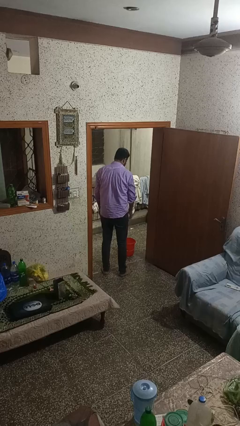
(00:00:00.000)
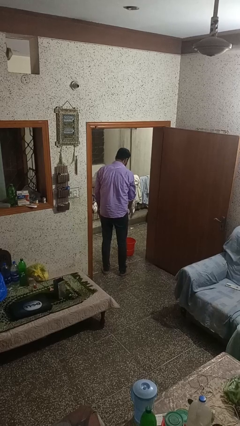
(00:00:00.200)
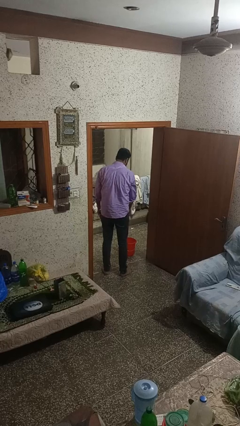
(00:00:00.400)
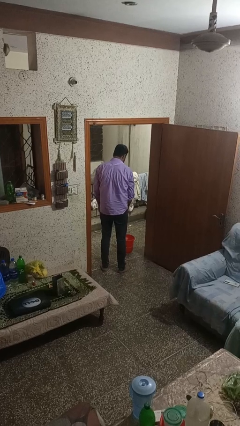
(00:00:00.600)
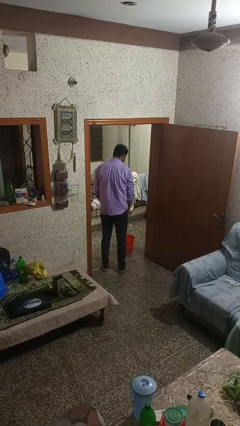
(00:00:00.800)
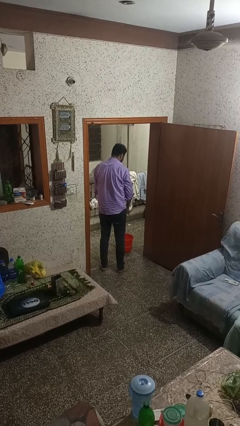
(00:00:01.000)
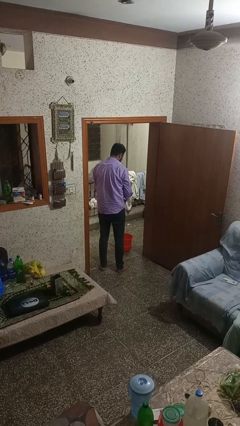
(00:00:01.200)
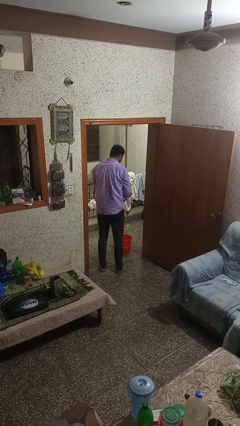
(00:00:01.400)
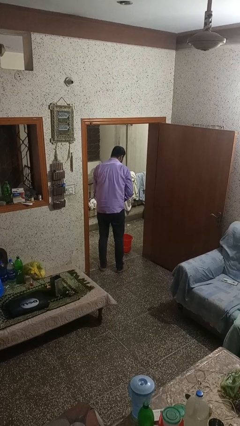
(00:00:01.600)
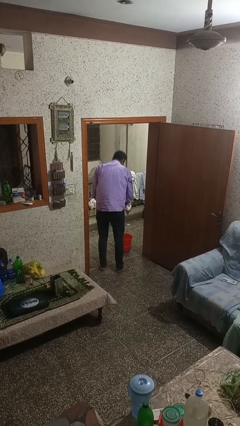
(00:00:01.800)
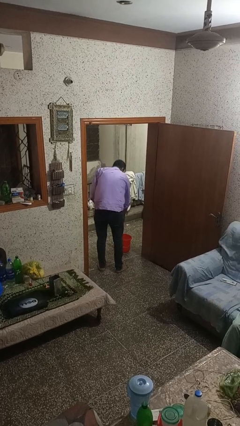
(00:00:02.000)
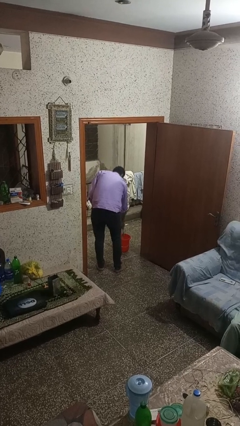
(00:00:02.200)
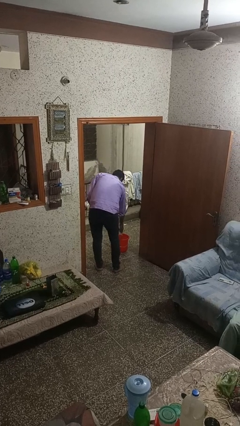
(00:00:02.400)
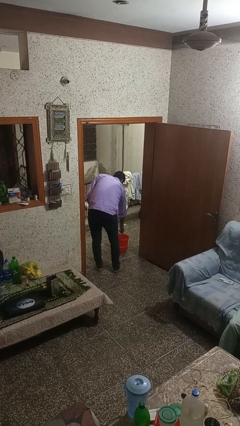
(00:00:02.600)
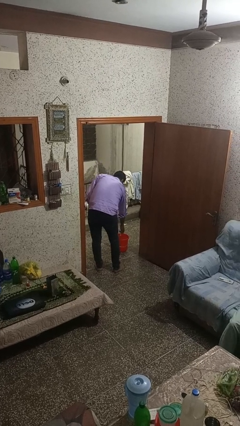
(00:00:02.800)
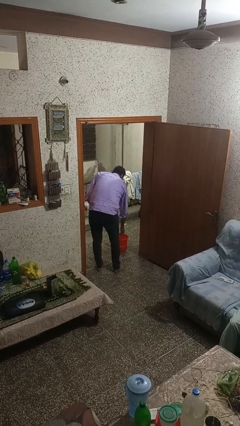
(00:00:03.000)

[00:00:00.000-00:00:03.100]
person discards trash

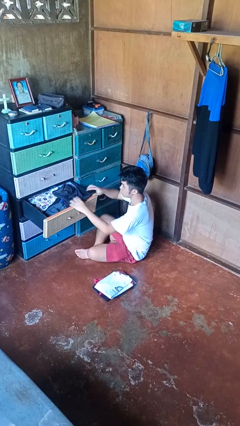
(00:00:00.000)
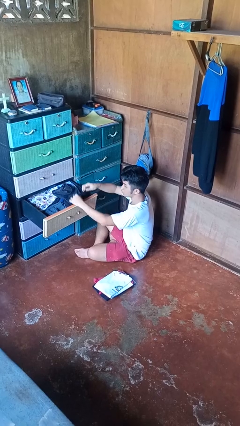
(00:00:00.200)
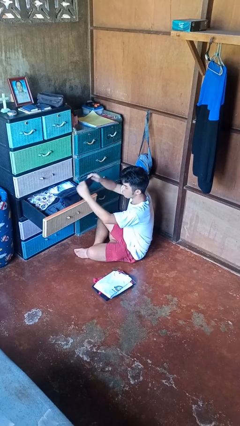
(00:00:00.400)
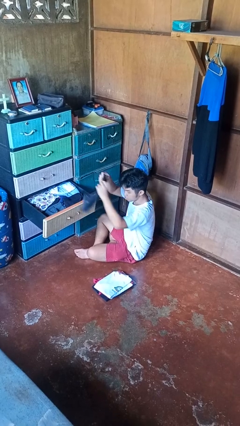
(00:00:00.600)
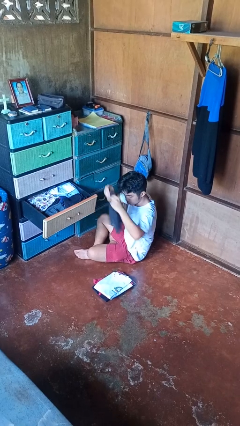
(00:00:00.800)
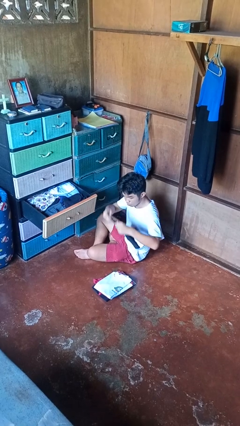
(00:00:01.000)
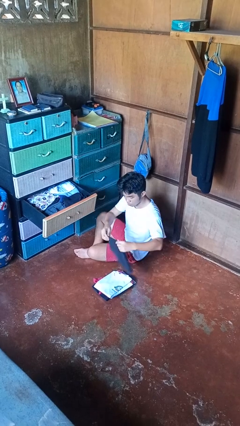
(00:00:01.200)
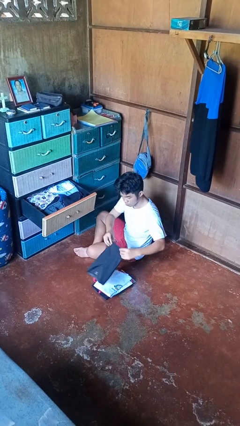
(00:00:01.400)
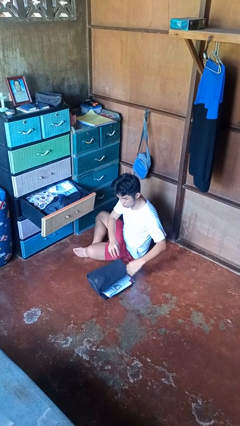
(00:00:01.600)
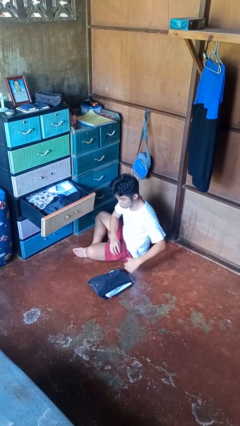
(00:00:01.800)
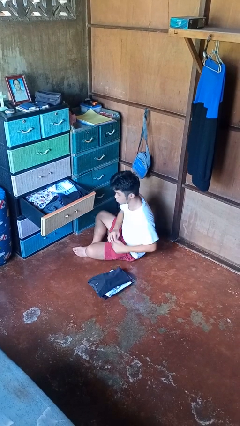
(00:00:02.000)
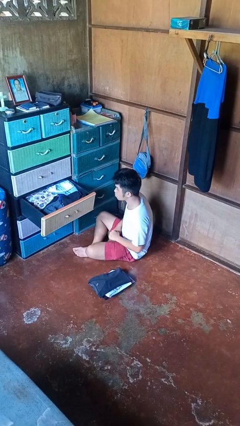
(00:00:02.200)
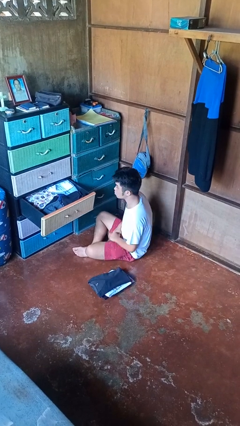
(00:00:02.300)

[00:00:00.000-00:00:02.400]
person takes clothes from dresser

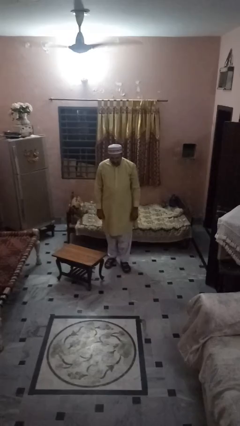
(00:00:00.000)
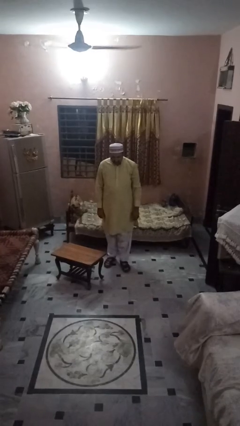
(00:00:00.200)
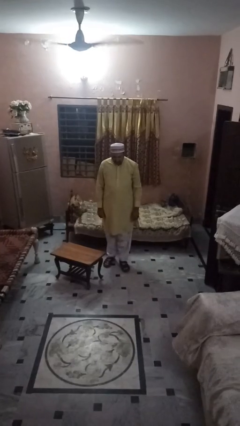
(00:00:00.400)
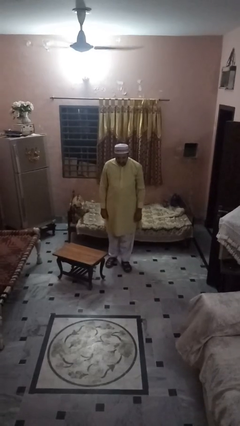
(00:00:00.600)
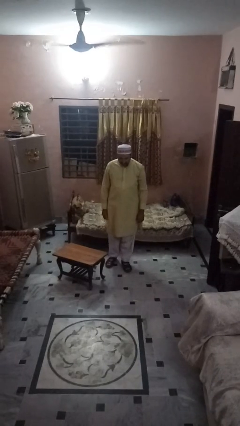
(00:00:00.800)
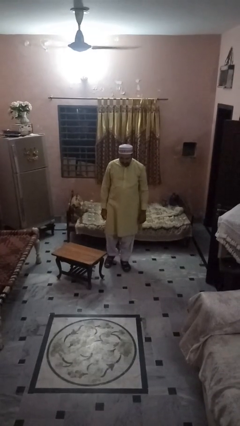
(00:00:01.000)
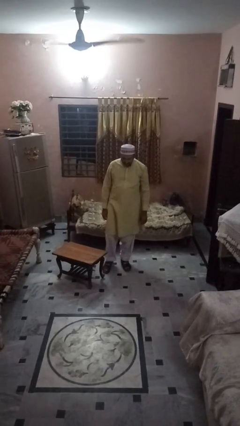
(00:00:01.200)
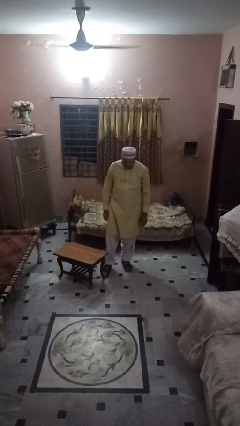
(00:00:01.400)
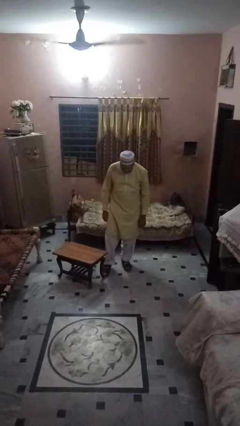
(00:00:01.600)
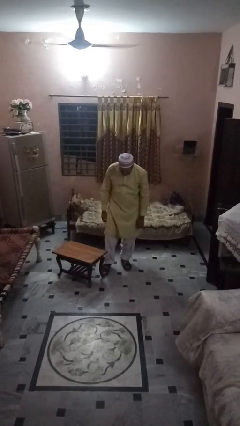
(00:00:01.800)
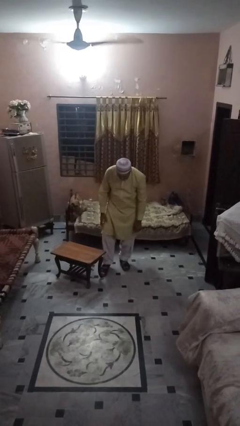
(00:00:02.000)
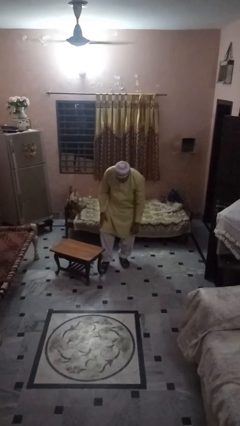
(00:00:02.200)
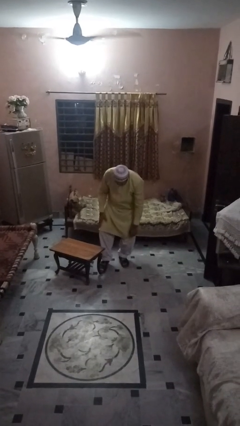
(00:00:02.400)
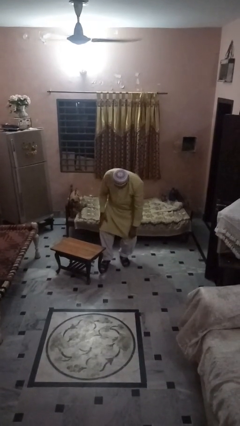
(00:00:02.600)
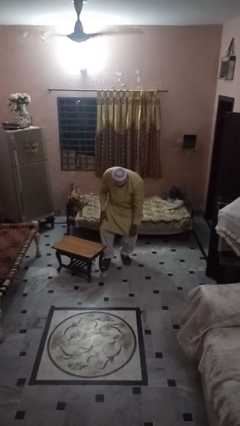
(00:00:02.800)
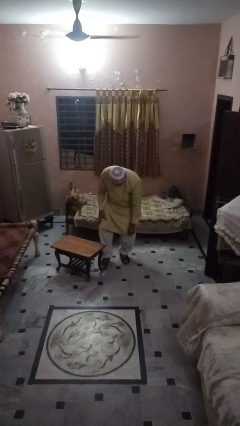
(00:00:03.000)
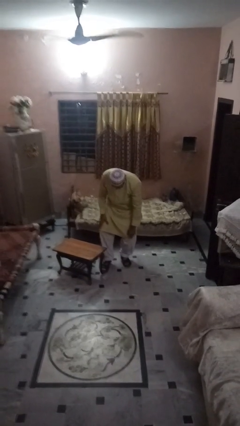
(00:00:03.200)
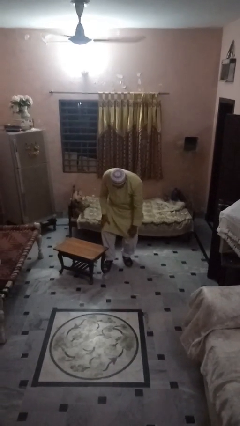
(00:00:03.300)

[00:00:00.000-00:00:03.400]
person trips on object on floor

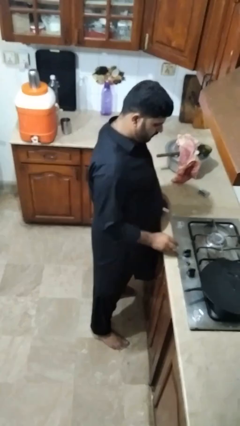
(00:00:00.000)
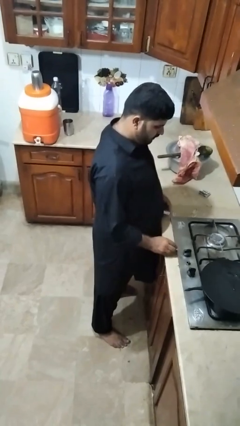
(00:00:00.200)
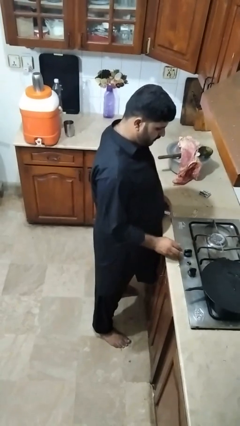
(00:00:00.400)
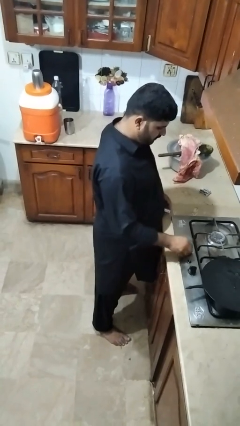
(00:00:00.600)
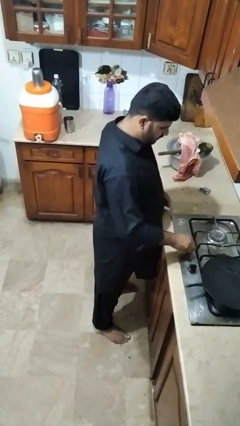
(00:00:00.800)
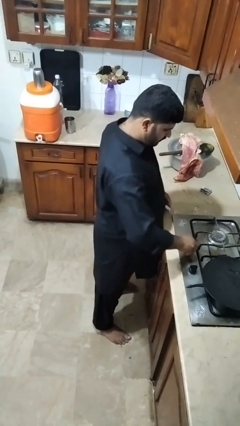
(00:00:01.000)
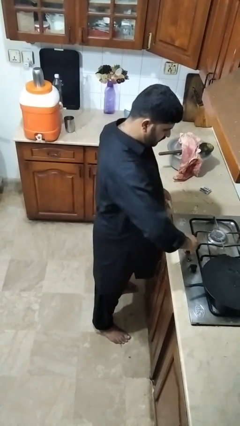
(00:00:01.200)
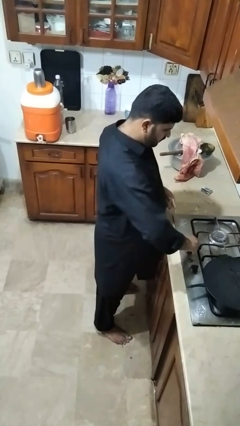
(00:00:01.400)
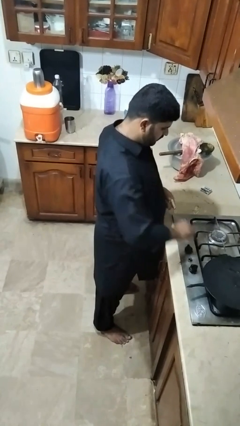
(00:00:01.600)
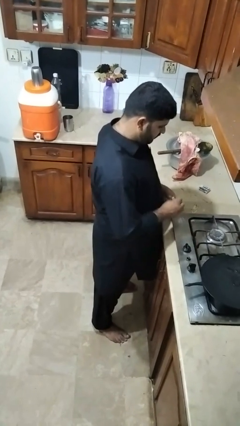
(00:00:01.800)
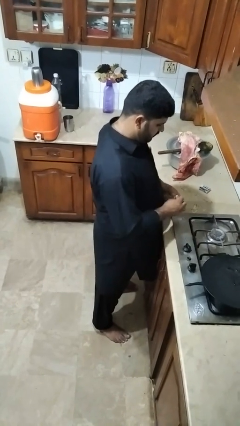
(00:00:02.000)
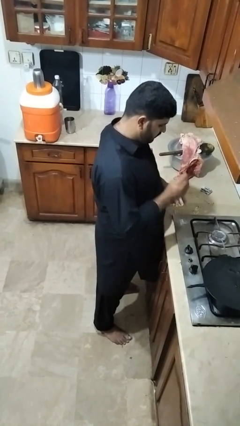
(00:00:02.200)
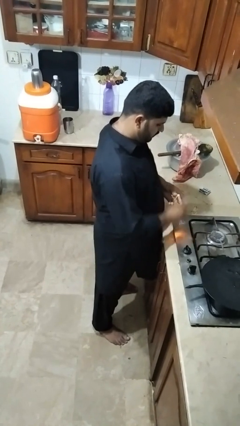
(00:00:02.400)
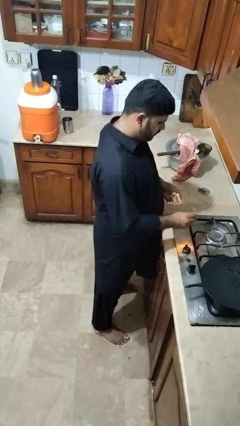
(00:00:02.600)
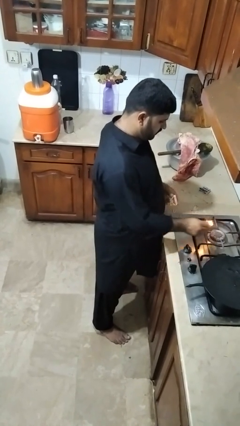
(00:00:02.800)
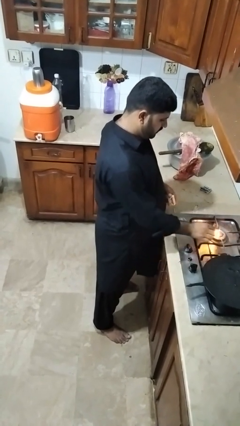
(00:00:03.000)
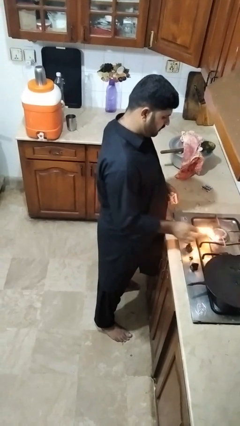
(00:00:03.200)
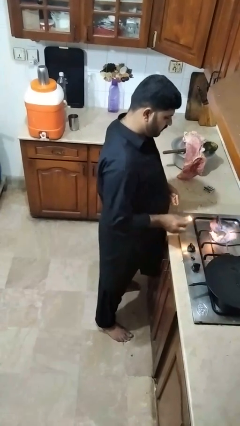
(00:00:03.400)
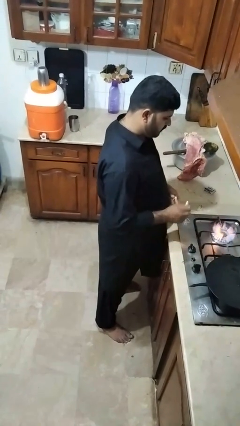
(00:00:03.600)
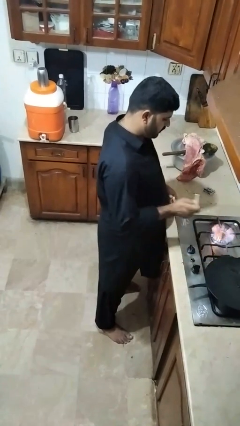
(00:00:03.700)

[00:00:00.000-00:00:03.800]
person turns on stovetop

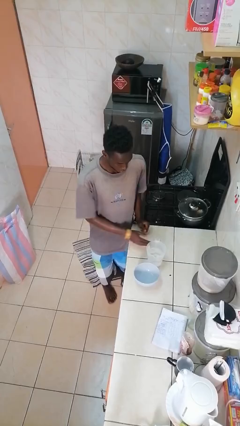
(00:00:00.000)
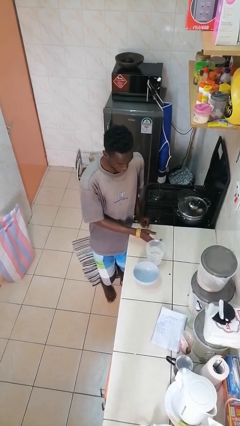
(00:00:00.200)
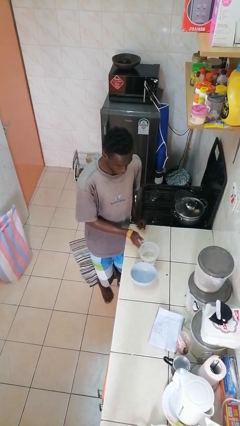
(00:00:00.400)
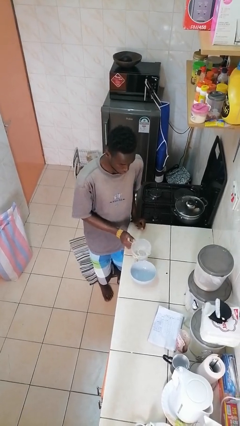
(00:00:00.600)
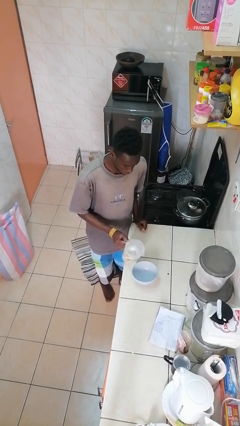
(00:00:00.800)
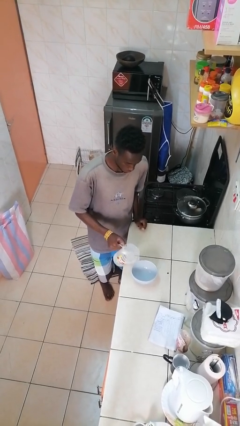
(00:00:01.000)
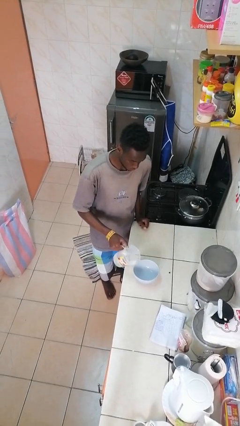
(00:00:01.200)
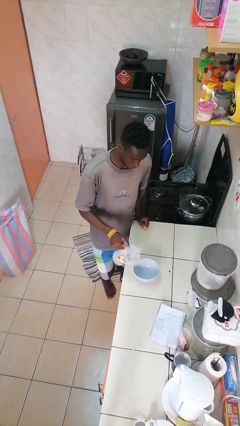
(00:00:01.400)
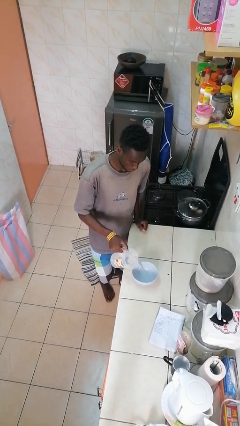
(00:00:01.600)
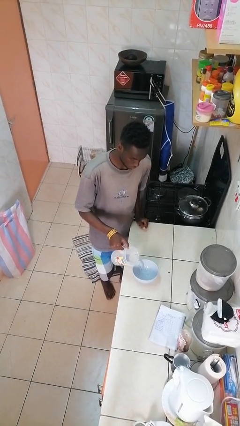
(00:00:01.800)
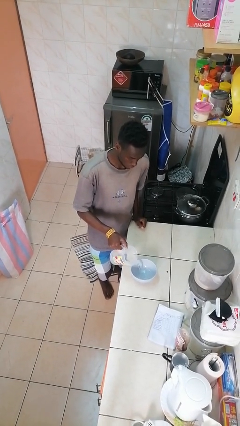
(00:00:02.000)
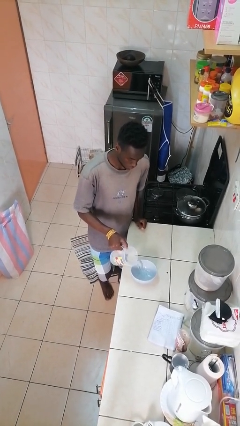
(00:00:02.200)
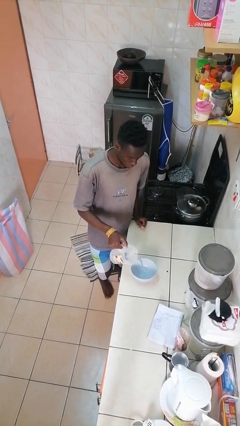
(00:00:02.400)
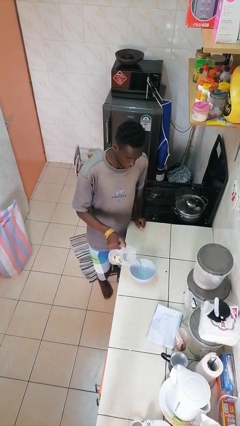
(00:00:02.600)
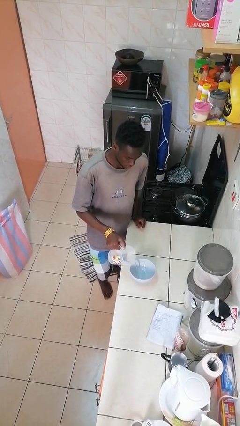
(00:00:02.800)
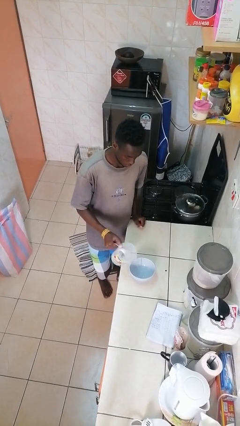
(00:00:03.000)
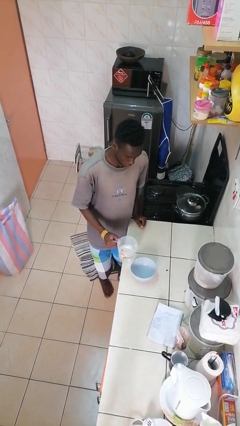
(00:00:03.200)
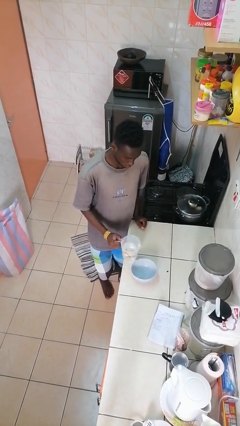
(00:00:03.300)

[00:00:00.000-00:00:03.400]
person pours into bowl

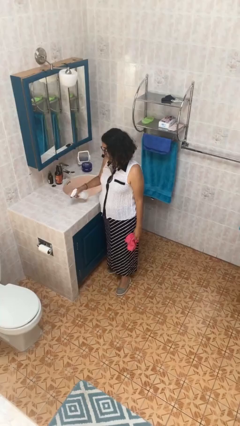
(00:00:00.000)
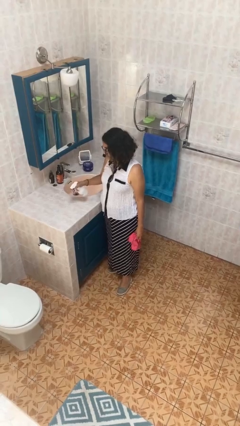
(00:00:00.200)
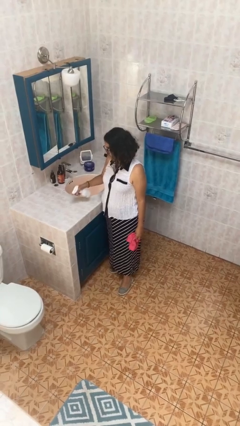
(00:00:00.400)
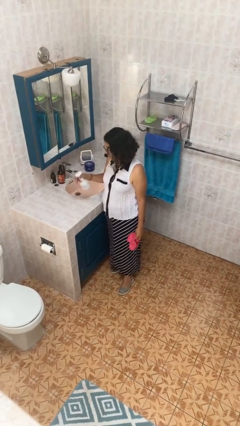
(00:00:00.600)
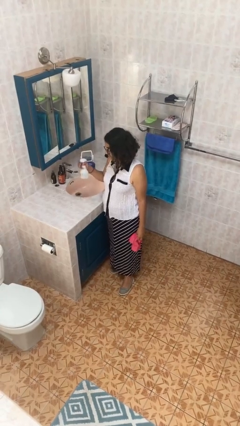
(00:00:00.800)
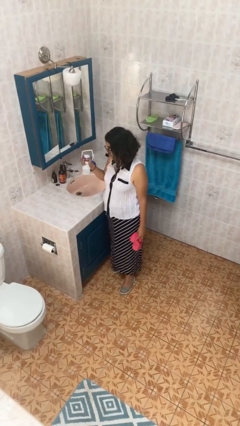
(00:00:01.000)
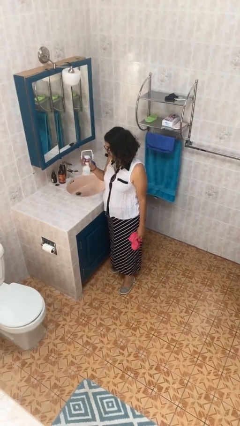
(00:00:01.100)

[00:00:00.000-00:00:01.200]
person sprays from bottle

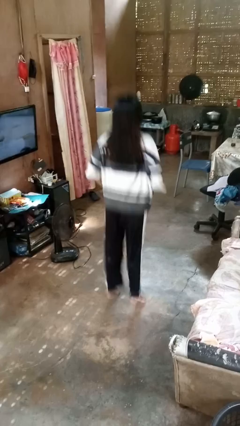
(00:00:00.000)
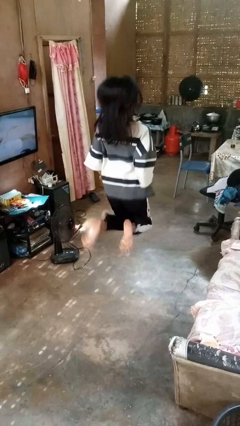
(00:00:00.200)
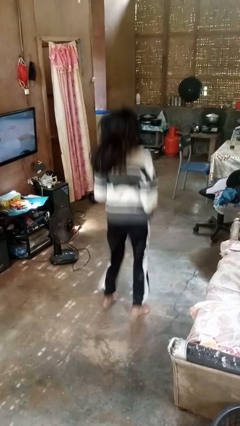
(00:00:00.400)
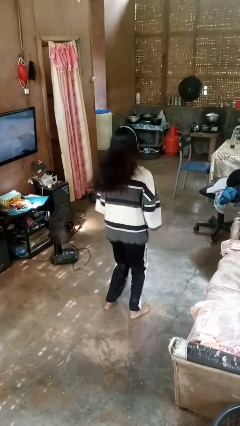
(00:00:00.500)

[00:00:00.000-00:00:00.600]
person jumps
